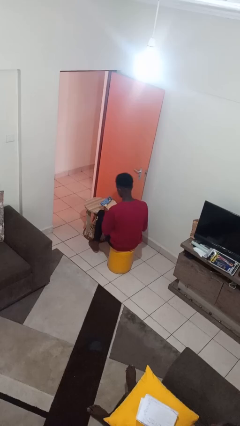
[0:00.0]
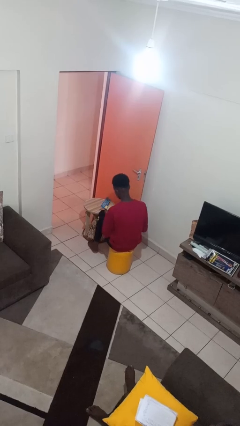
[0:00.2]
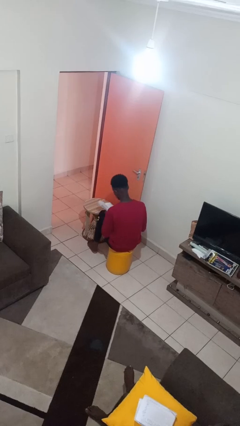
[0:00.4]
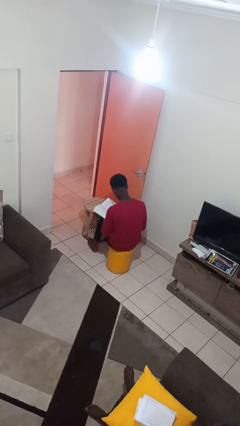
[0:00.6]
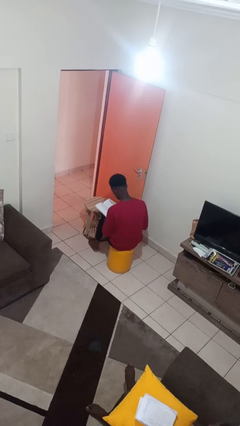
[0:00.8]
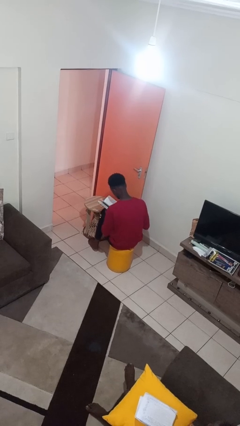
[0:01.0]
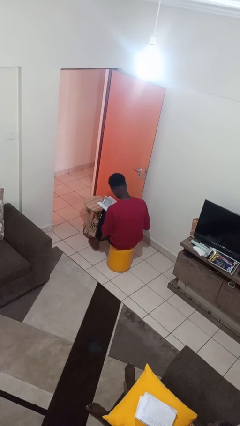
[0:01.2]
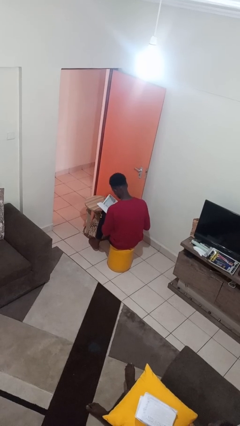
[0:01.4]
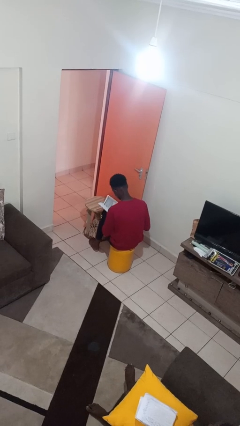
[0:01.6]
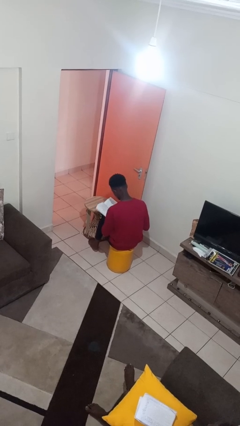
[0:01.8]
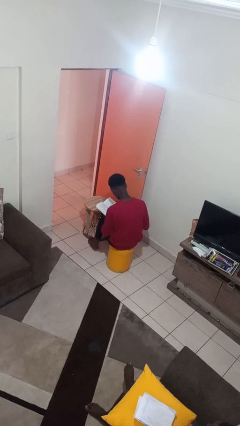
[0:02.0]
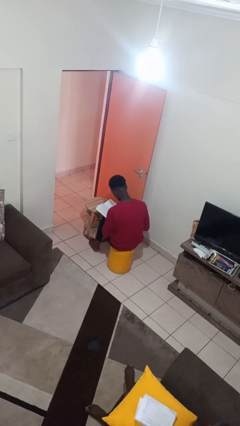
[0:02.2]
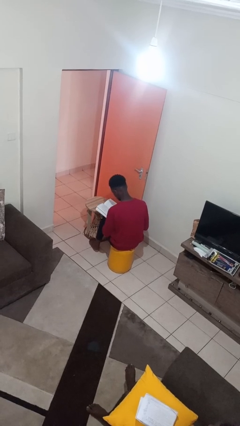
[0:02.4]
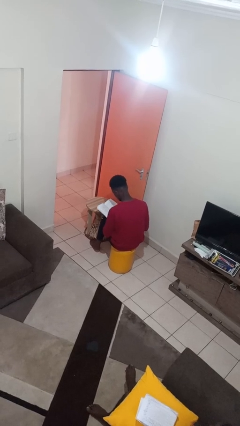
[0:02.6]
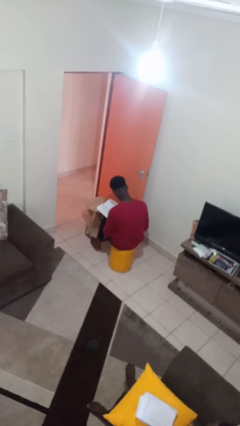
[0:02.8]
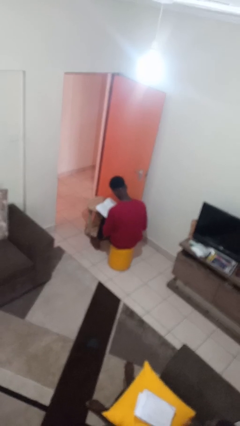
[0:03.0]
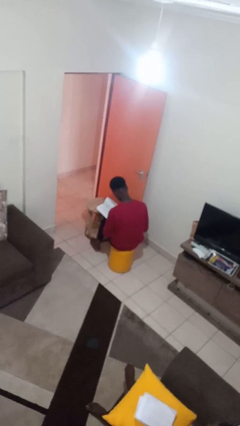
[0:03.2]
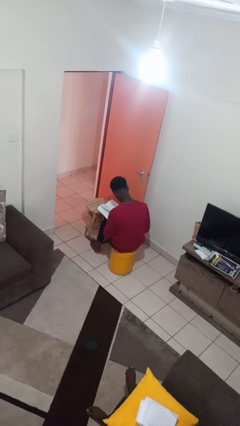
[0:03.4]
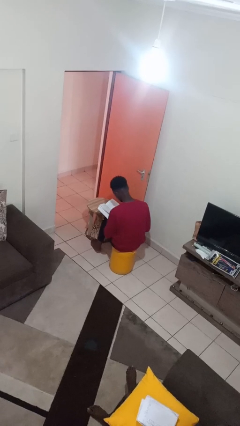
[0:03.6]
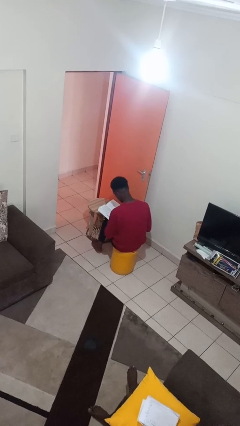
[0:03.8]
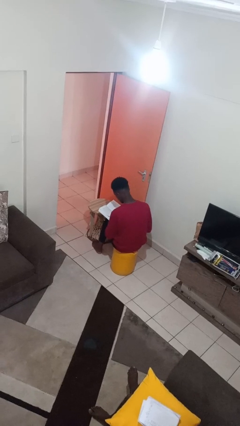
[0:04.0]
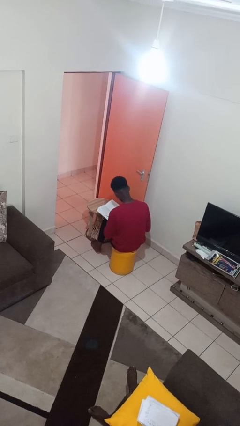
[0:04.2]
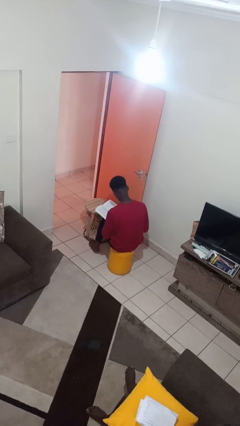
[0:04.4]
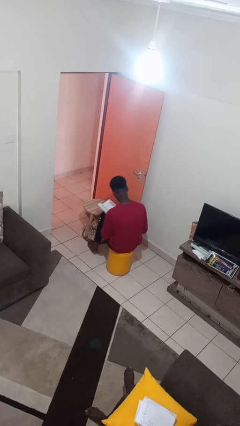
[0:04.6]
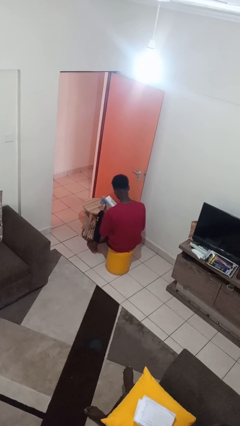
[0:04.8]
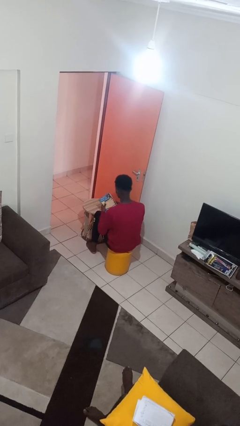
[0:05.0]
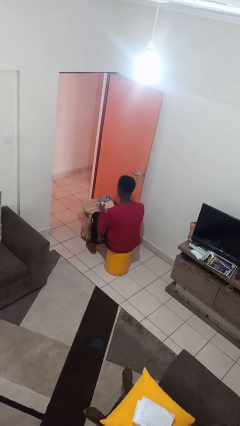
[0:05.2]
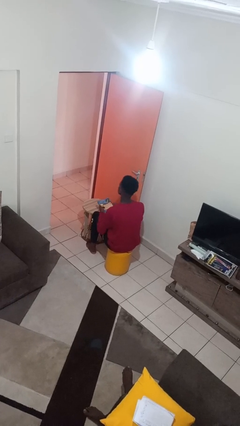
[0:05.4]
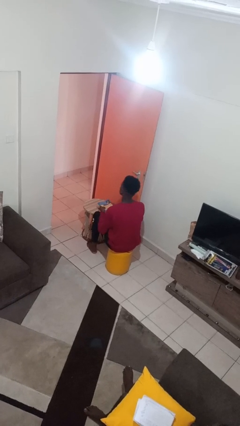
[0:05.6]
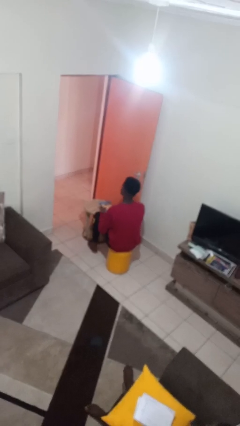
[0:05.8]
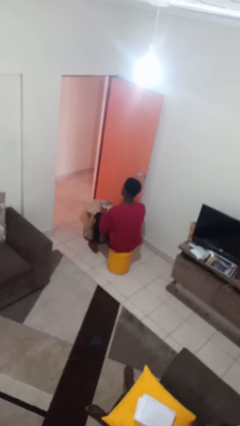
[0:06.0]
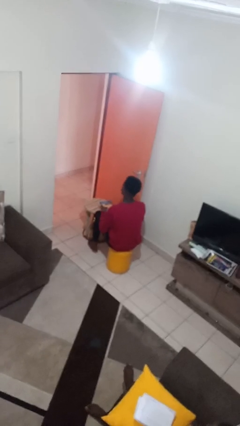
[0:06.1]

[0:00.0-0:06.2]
person reads book

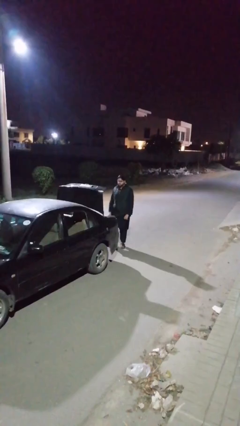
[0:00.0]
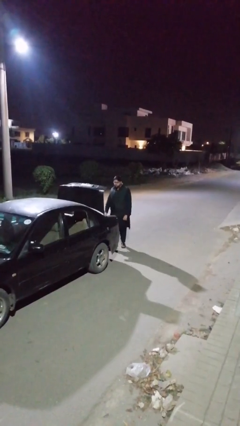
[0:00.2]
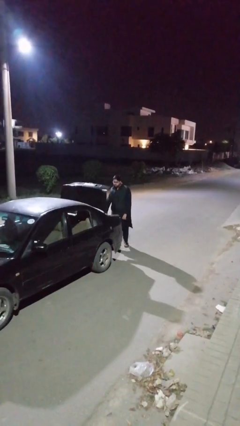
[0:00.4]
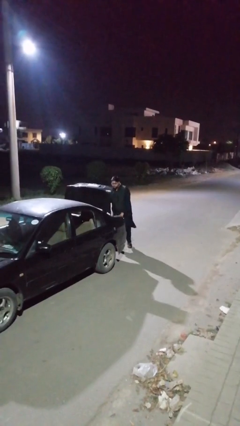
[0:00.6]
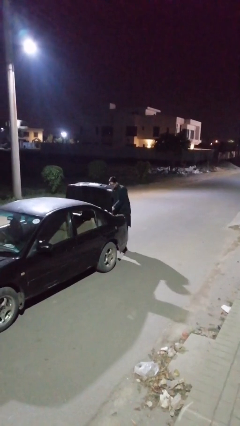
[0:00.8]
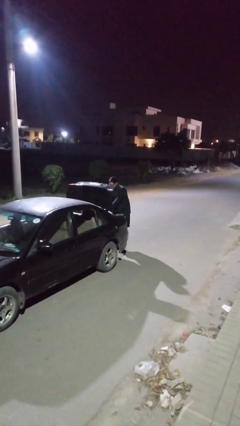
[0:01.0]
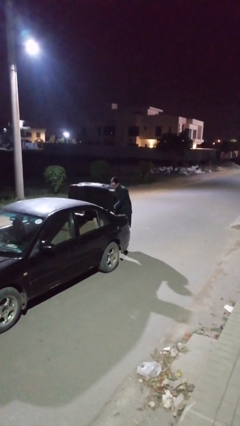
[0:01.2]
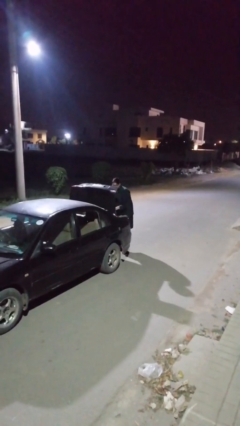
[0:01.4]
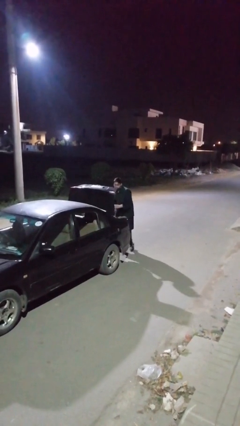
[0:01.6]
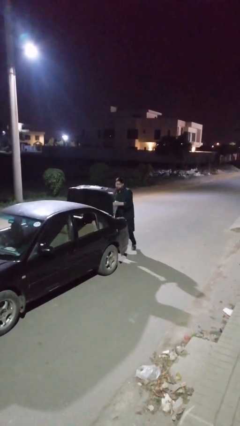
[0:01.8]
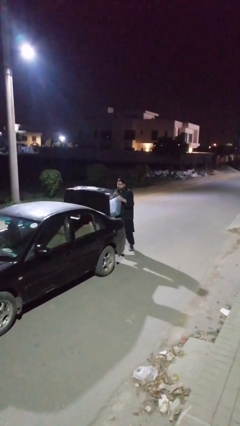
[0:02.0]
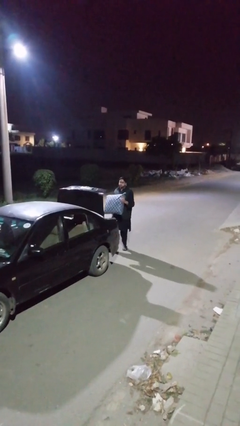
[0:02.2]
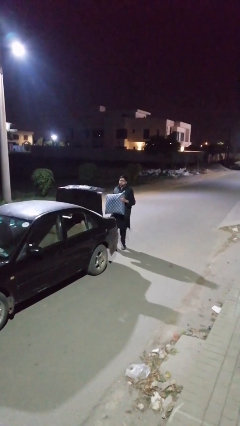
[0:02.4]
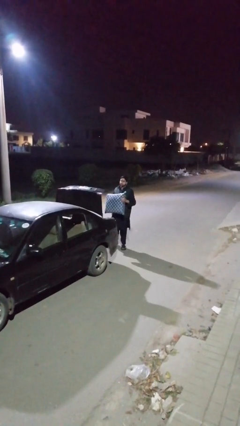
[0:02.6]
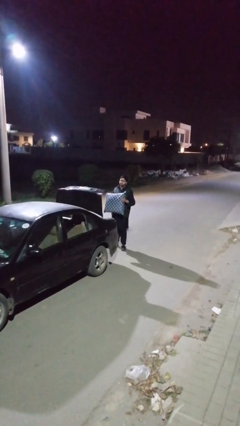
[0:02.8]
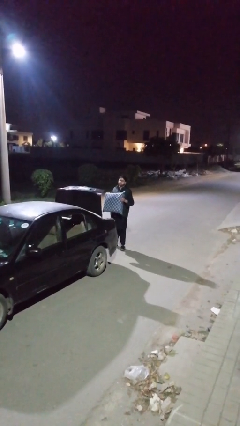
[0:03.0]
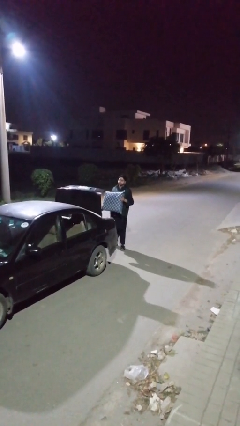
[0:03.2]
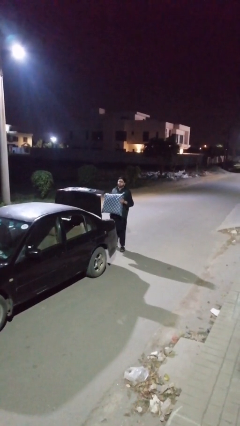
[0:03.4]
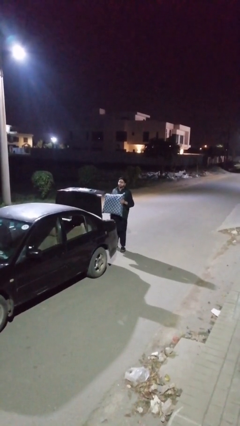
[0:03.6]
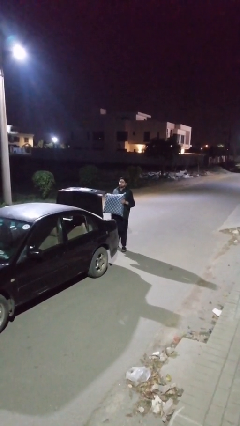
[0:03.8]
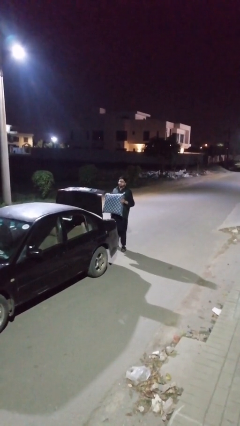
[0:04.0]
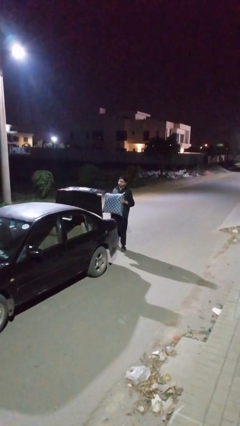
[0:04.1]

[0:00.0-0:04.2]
person unloads car

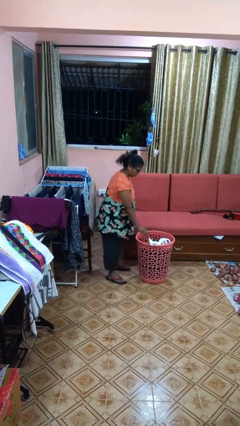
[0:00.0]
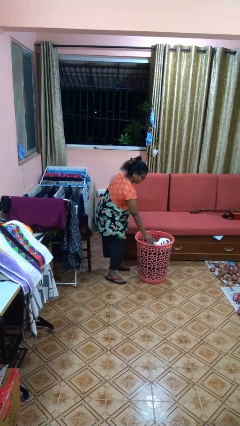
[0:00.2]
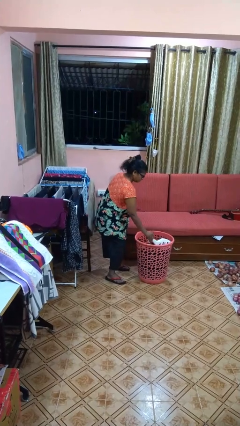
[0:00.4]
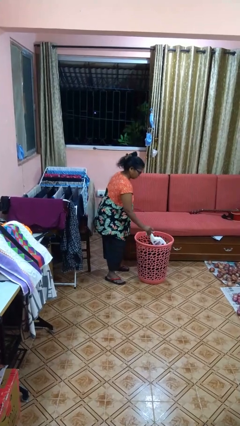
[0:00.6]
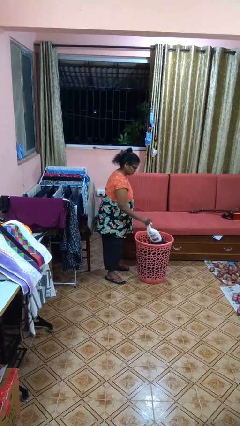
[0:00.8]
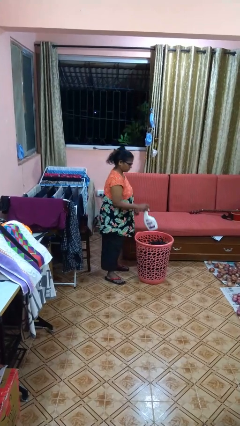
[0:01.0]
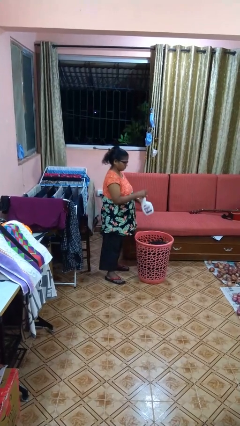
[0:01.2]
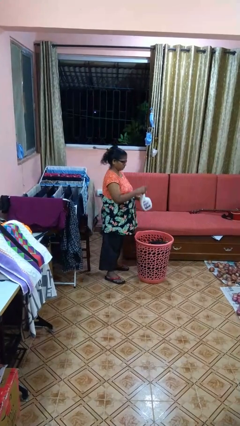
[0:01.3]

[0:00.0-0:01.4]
person takes object from basket

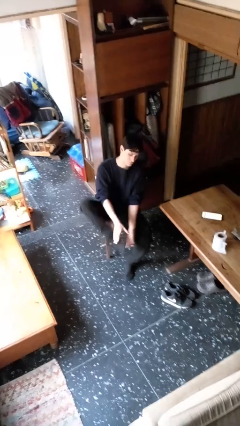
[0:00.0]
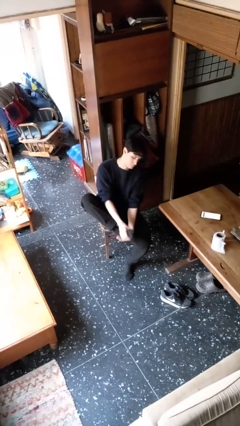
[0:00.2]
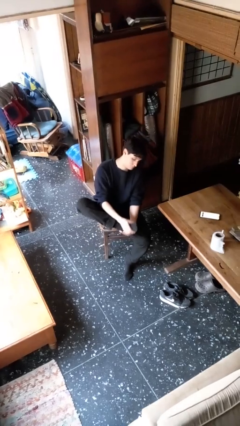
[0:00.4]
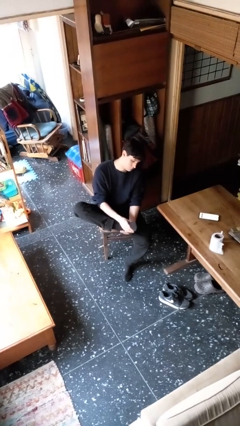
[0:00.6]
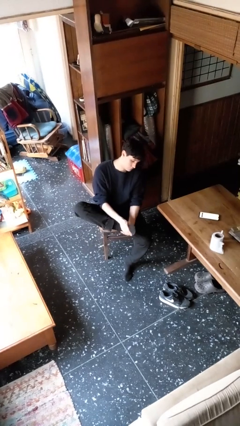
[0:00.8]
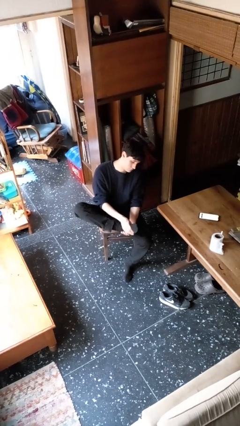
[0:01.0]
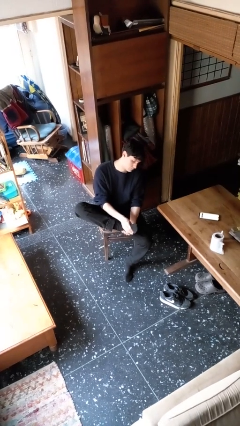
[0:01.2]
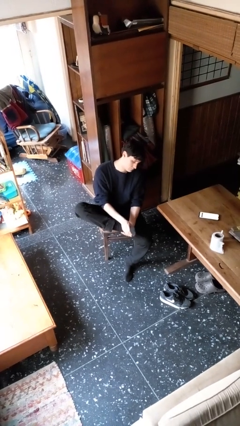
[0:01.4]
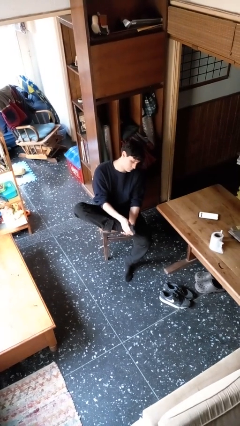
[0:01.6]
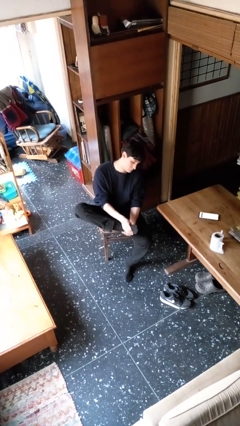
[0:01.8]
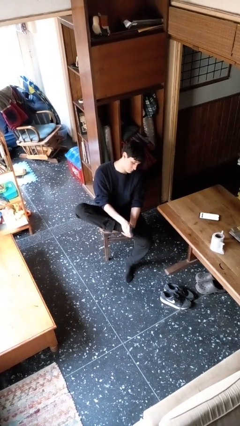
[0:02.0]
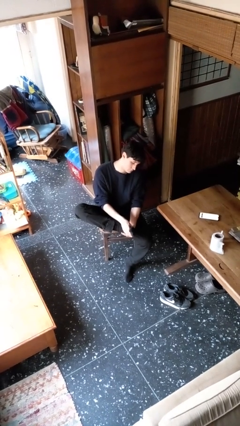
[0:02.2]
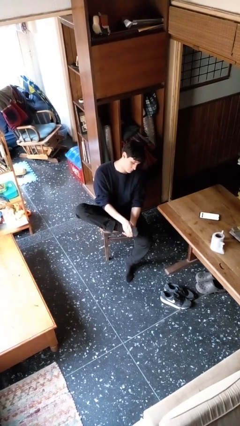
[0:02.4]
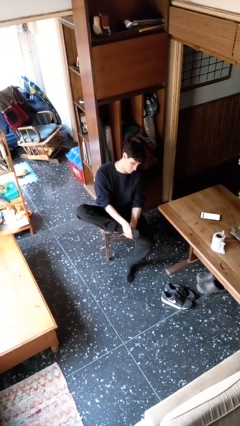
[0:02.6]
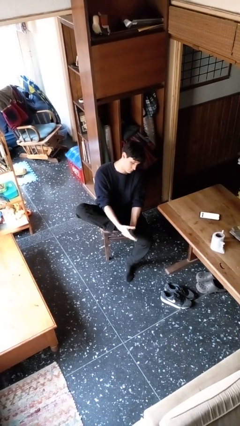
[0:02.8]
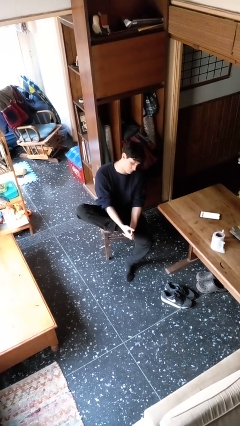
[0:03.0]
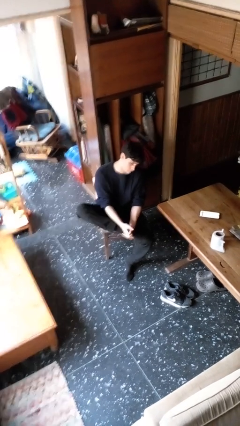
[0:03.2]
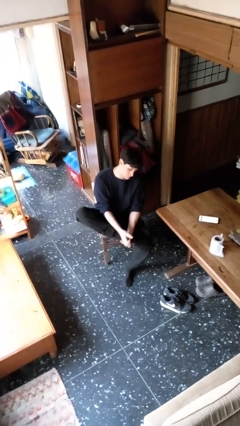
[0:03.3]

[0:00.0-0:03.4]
person rubs foot

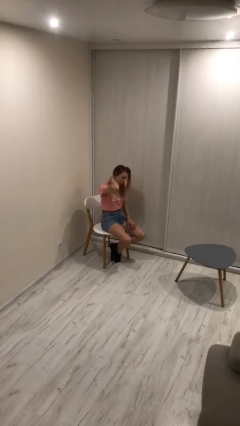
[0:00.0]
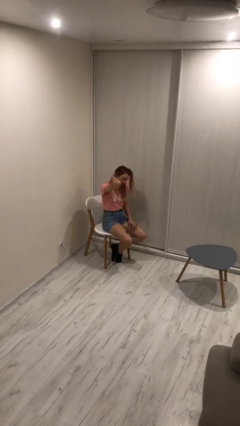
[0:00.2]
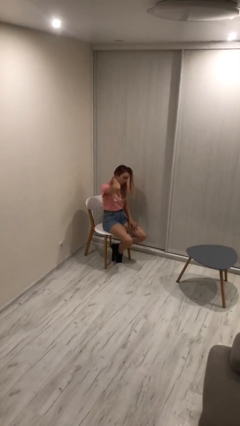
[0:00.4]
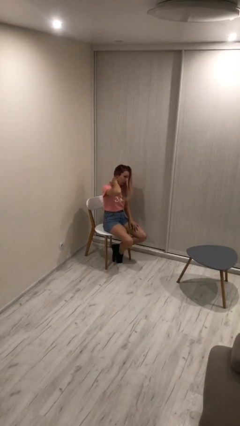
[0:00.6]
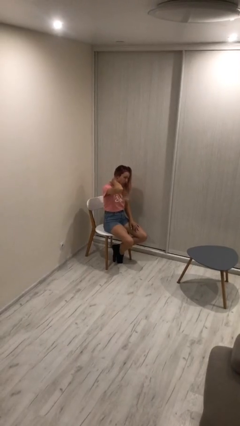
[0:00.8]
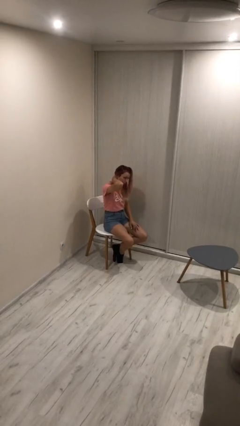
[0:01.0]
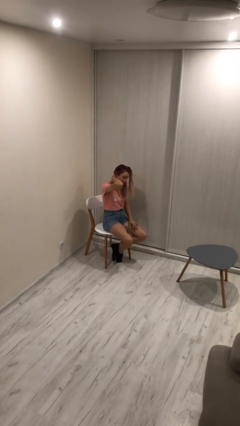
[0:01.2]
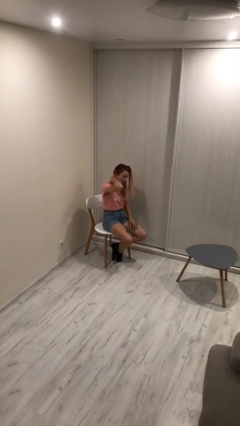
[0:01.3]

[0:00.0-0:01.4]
person rubs neck

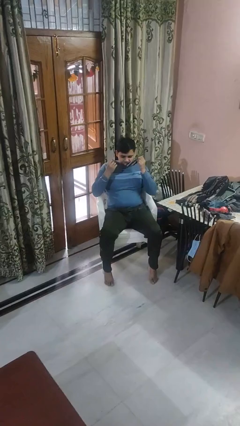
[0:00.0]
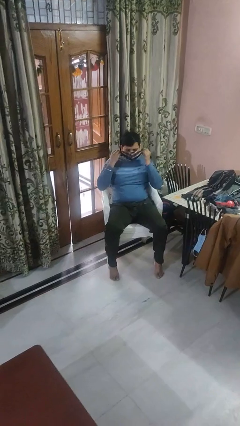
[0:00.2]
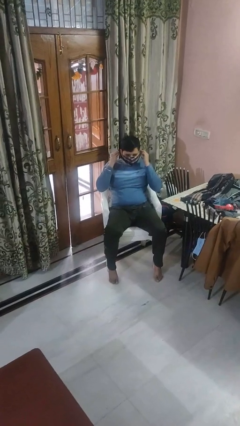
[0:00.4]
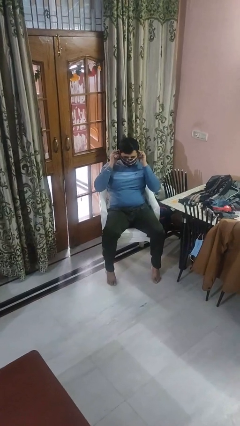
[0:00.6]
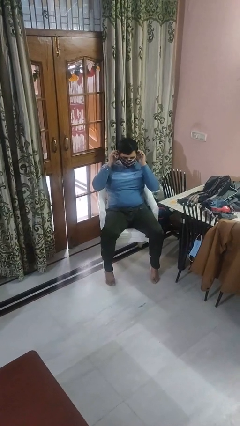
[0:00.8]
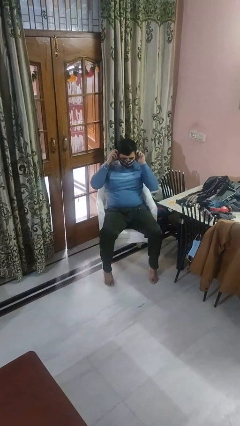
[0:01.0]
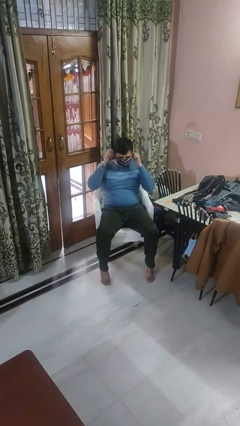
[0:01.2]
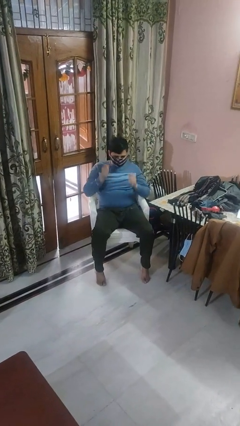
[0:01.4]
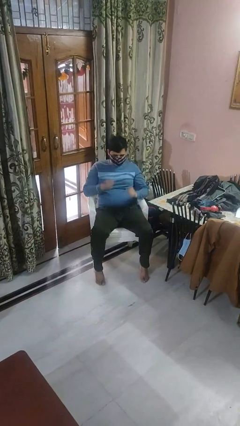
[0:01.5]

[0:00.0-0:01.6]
person puts on facemask
